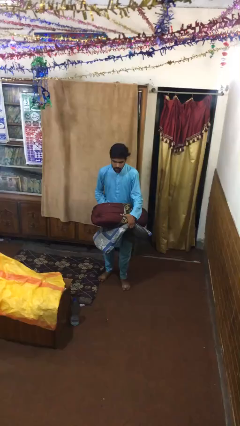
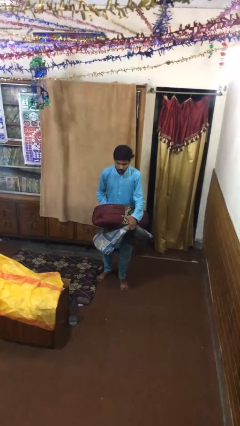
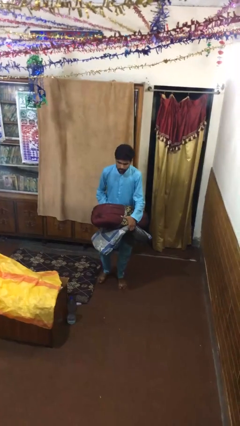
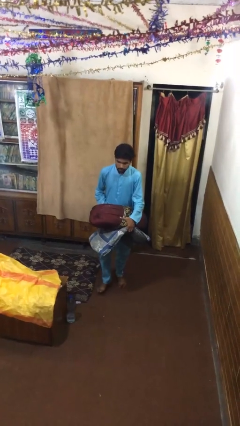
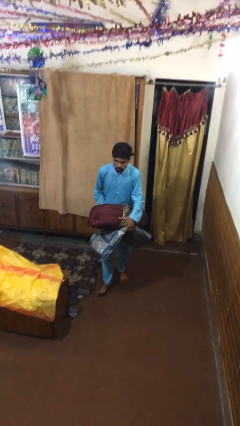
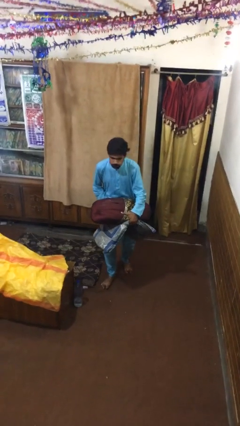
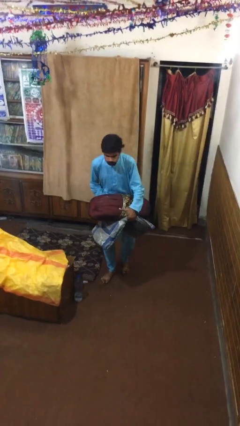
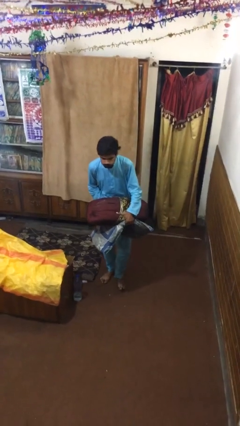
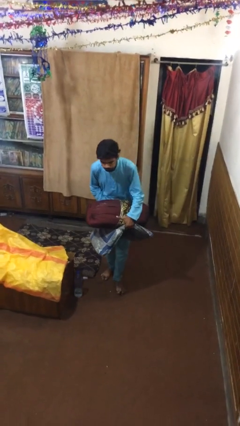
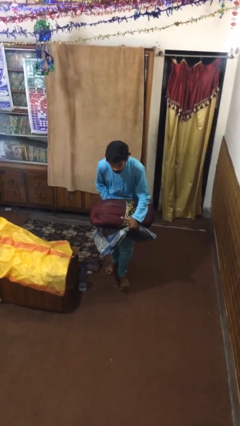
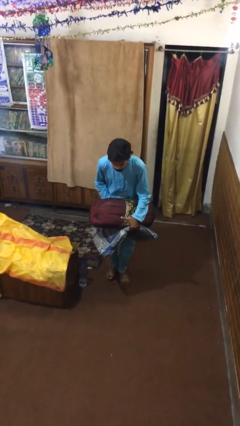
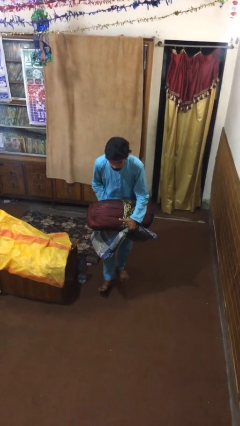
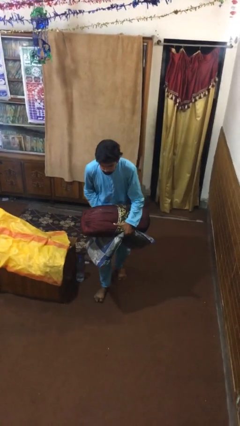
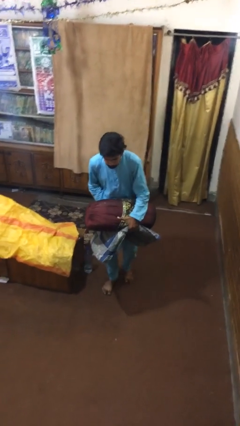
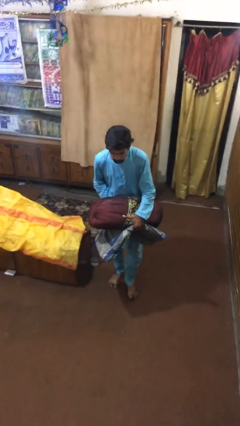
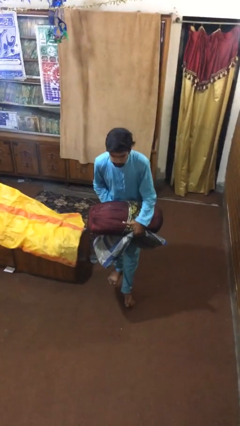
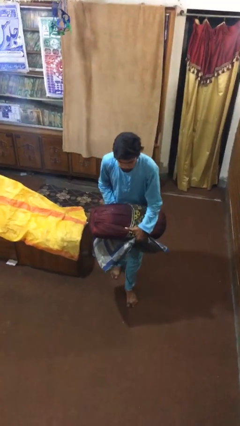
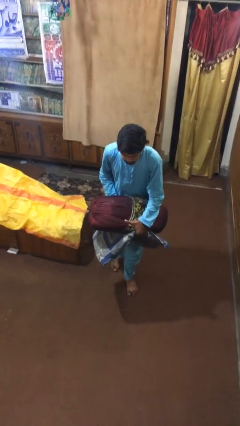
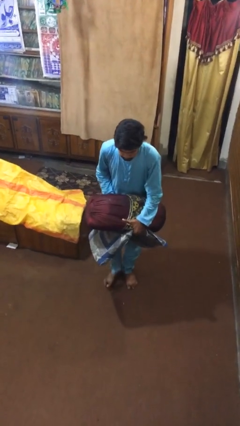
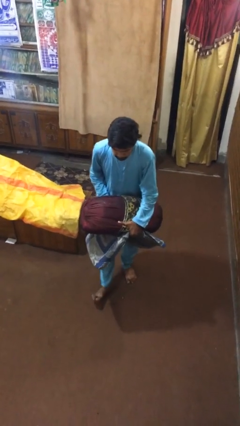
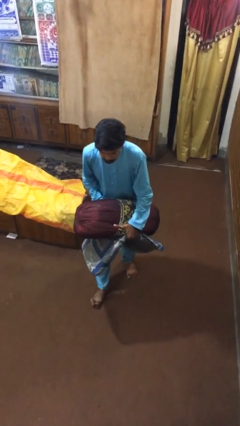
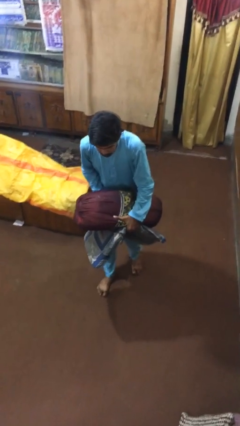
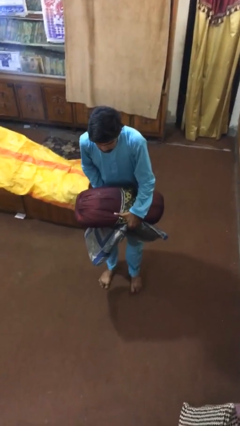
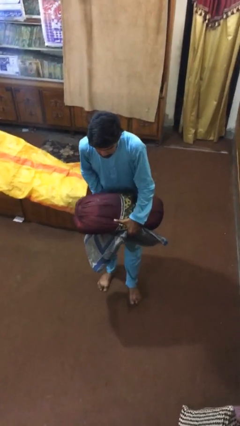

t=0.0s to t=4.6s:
person carries heavy object

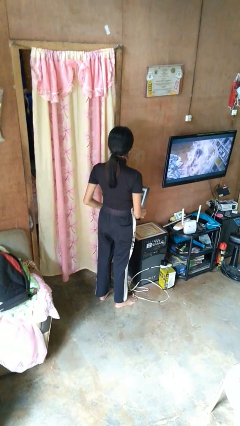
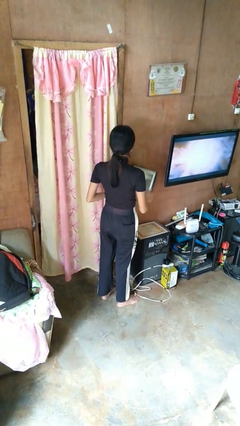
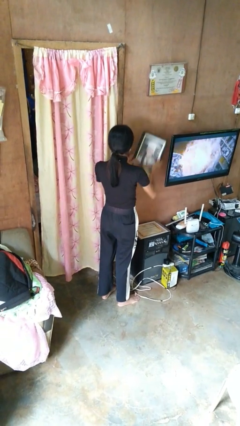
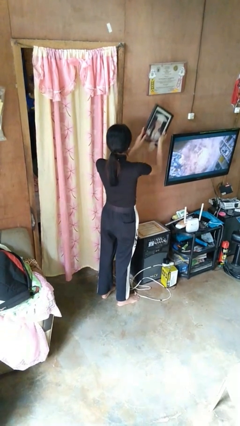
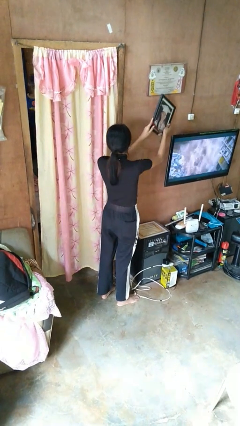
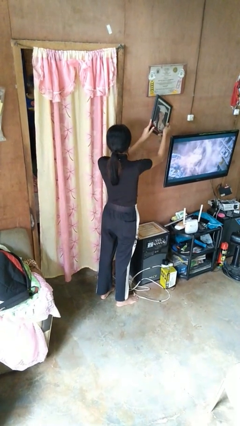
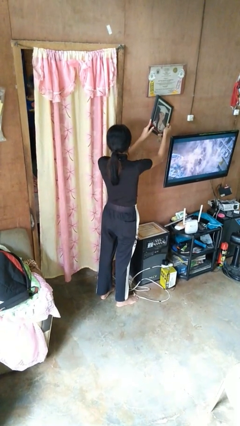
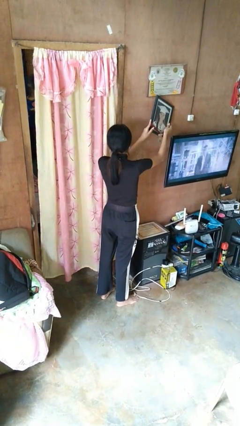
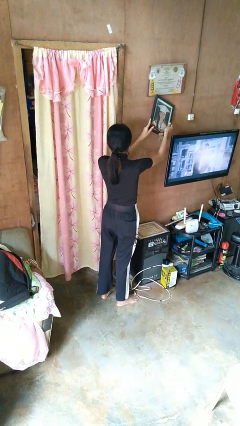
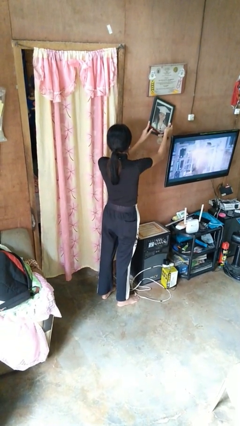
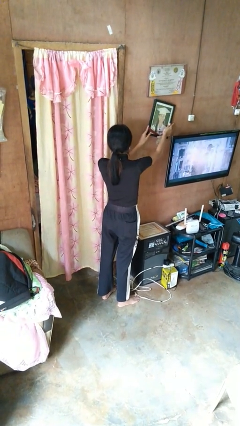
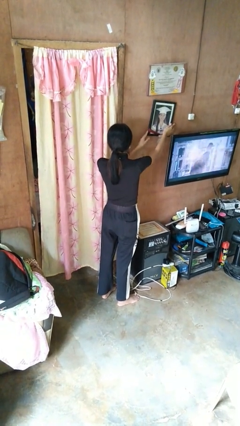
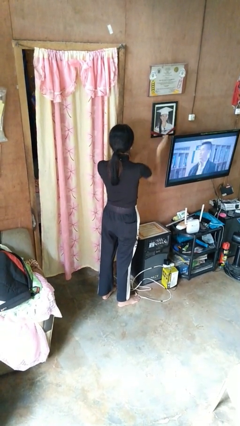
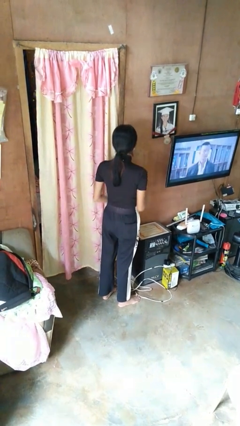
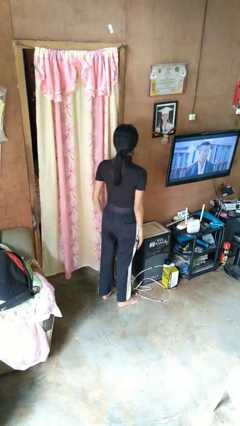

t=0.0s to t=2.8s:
person puts up picture frame

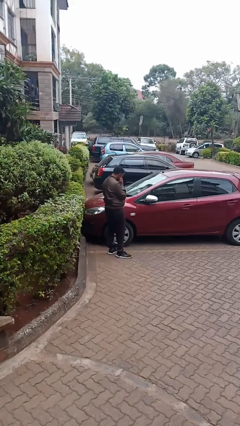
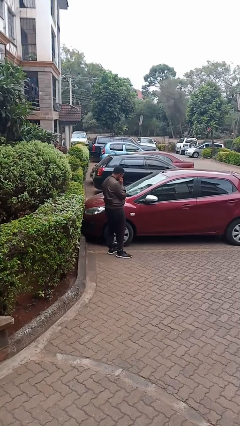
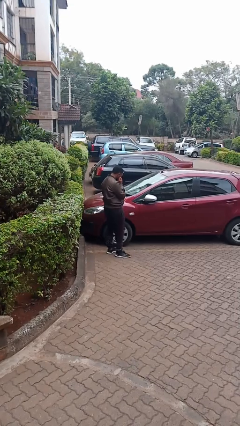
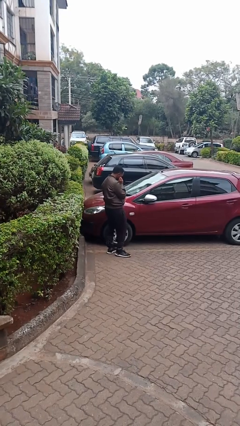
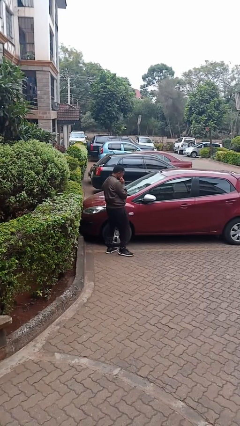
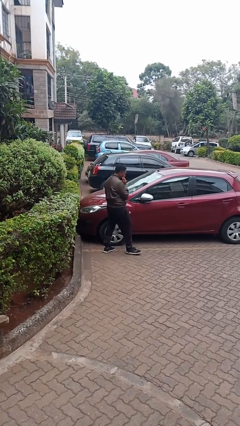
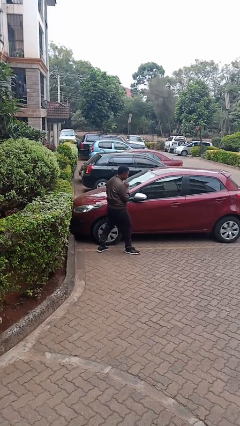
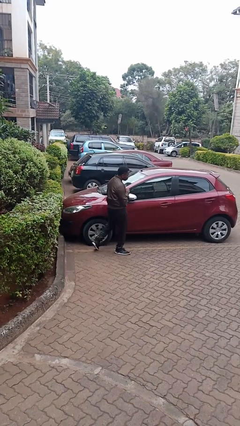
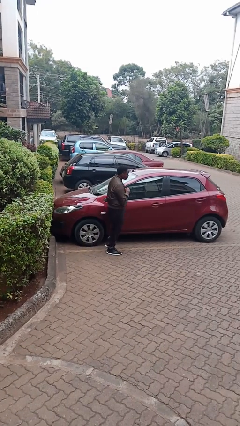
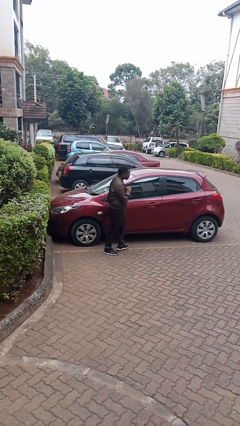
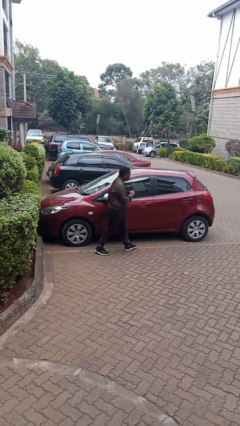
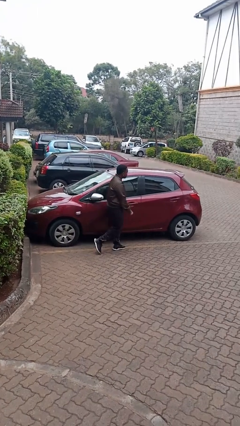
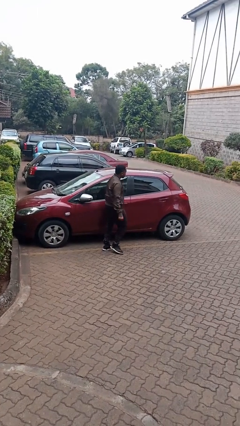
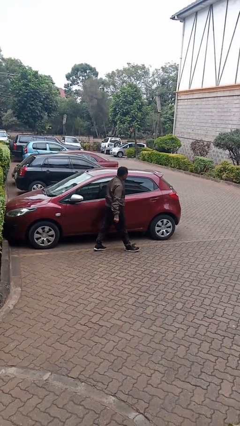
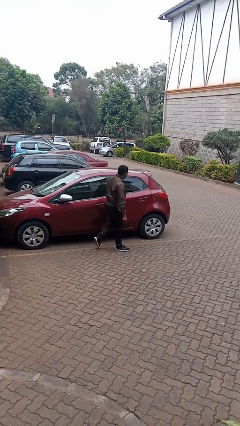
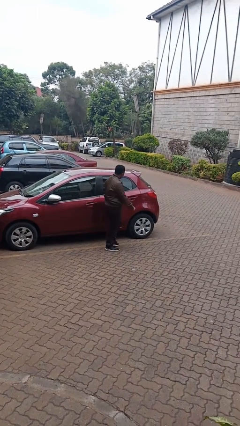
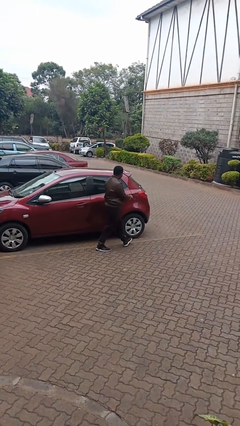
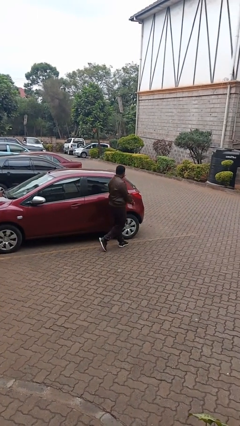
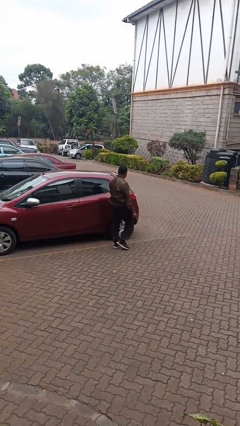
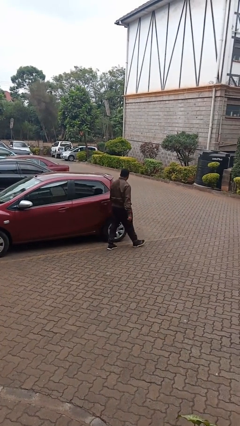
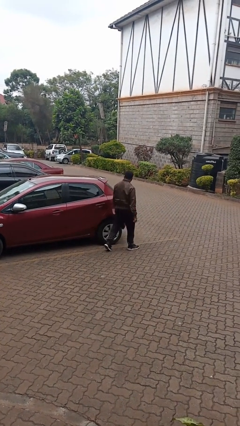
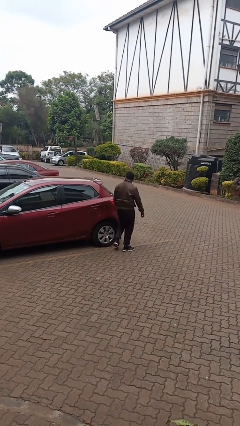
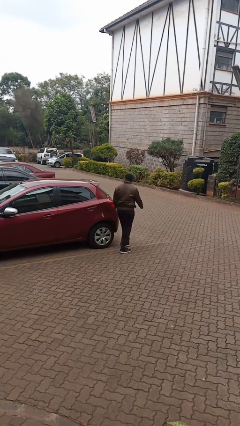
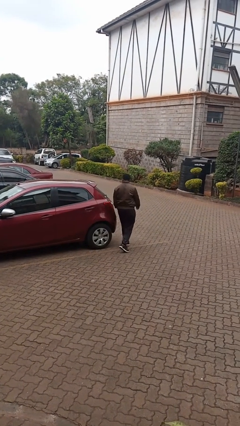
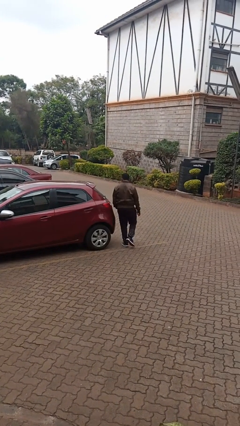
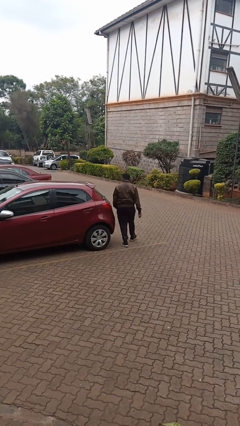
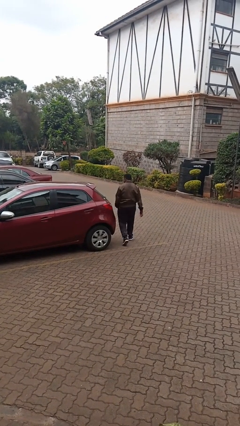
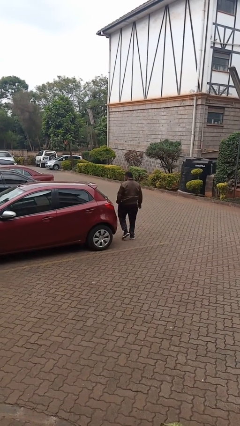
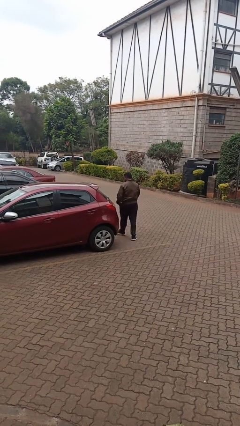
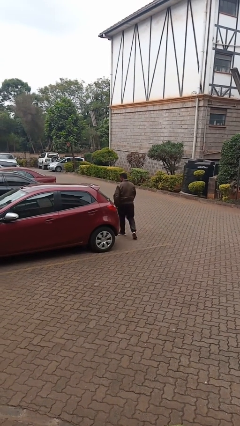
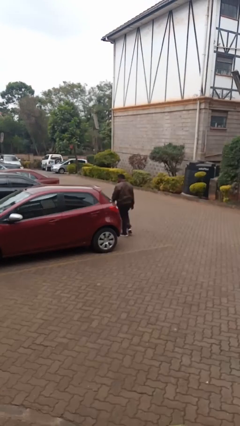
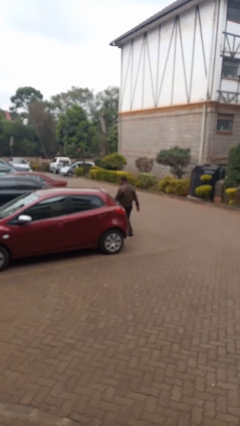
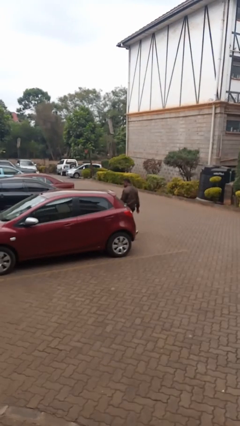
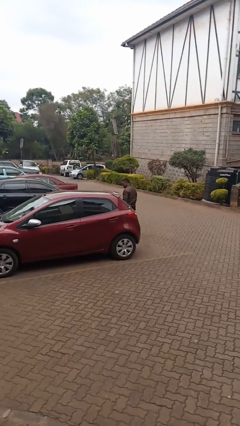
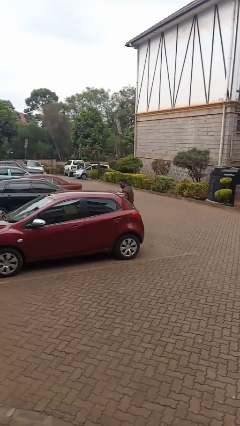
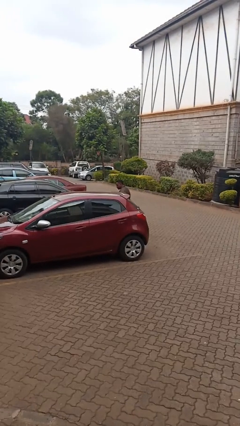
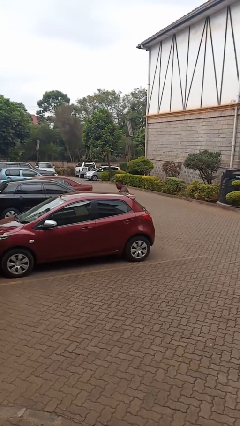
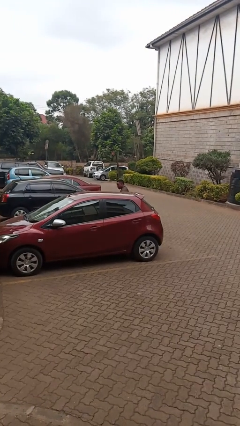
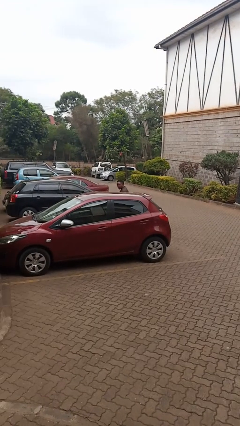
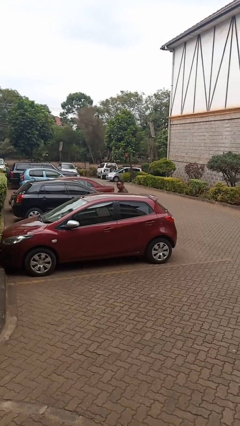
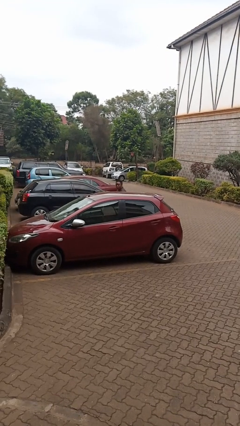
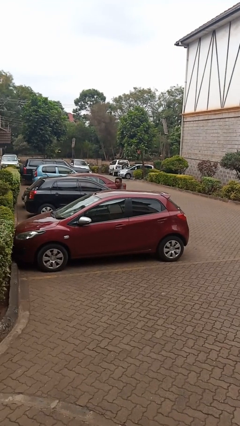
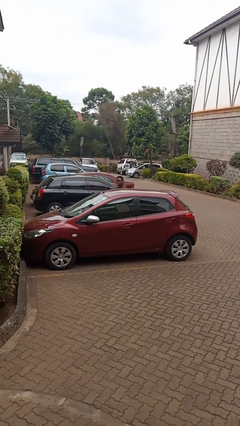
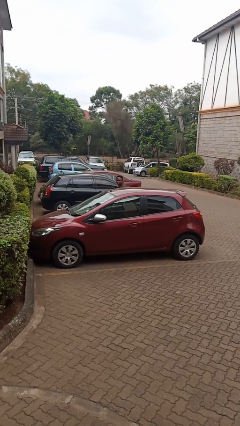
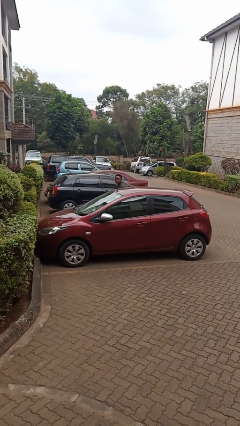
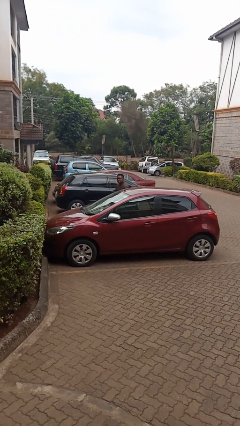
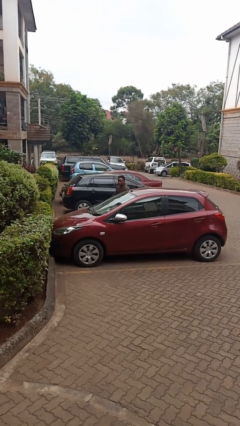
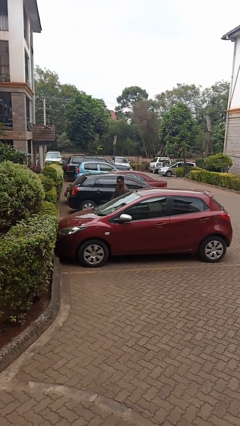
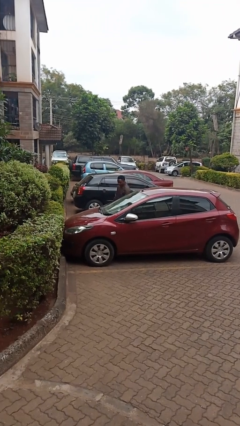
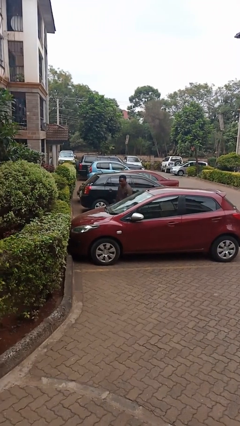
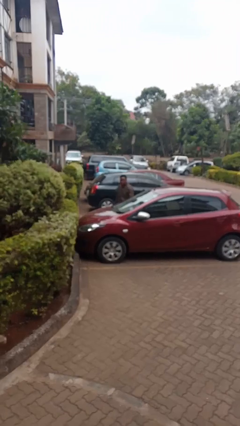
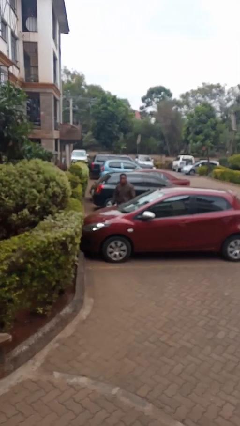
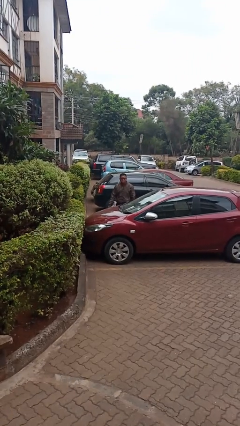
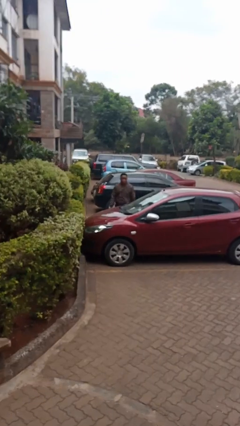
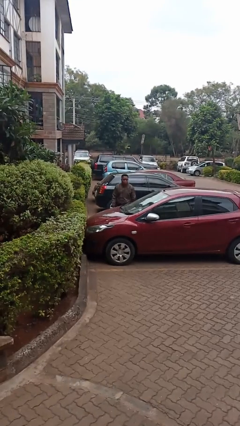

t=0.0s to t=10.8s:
person walks around car
